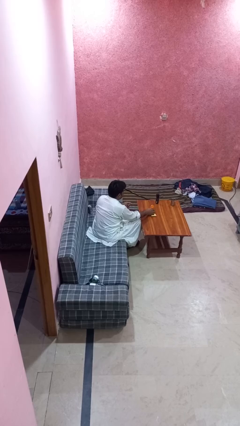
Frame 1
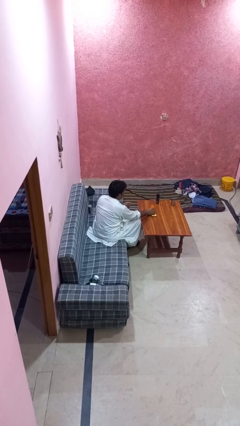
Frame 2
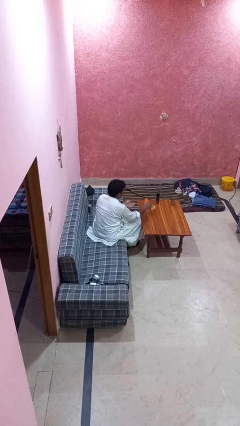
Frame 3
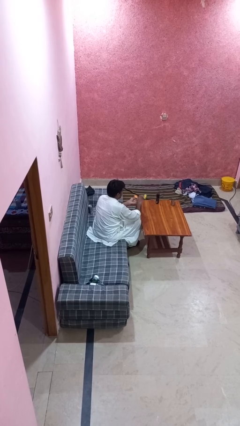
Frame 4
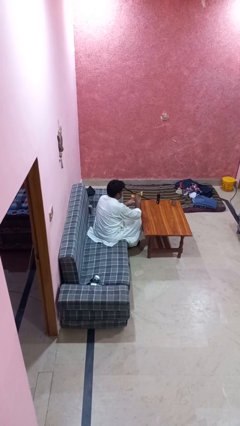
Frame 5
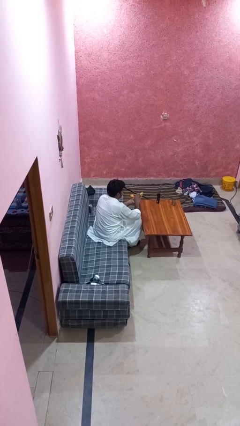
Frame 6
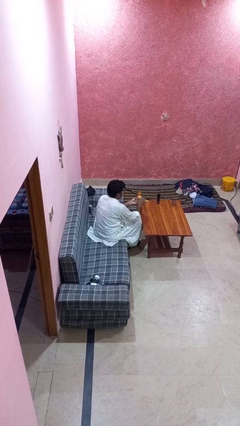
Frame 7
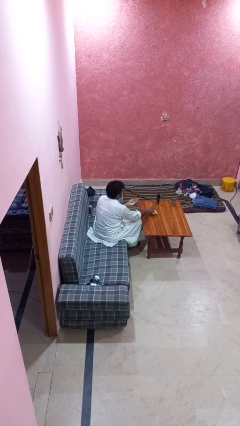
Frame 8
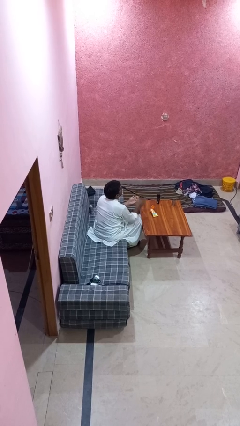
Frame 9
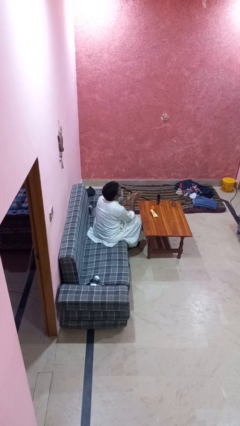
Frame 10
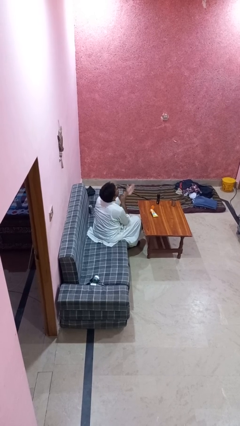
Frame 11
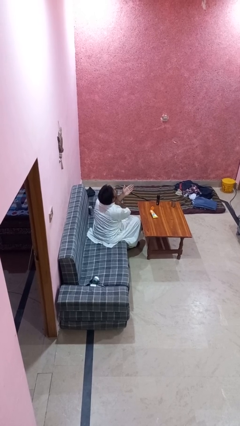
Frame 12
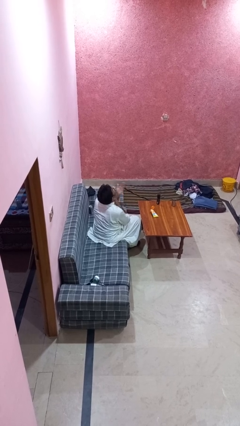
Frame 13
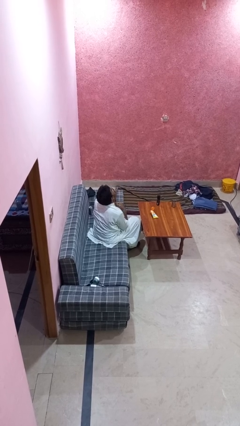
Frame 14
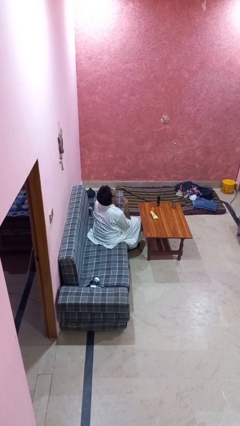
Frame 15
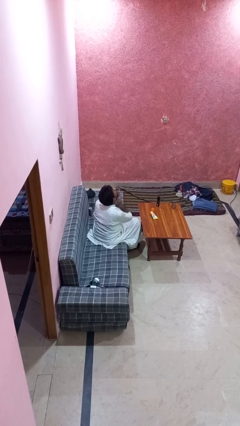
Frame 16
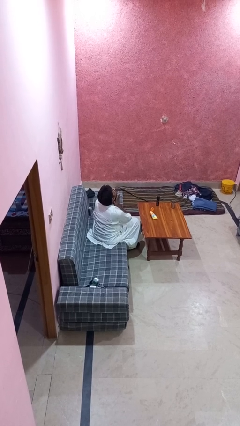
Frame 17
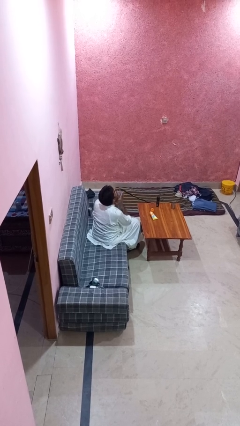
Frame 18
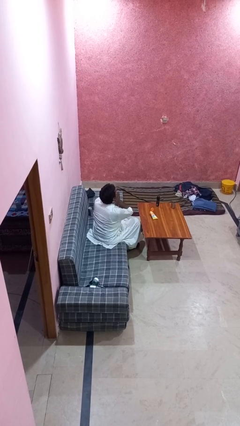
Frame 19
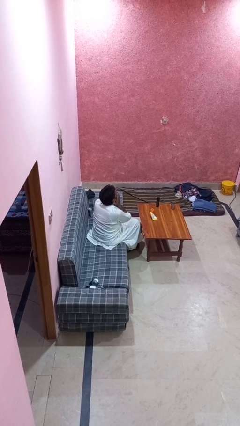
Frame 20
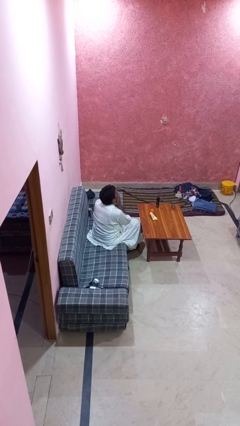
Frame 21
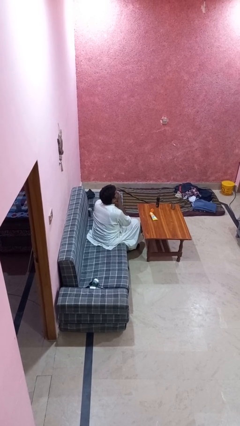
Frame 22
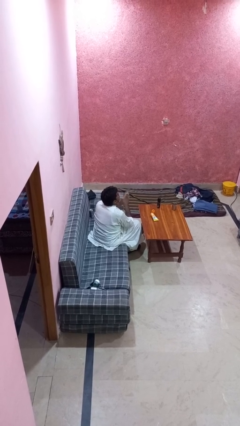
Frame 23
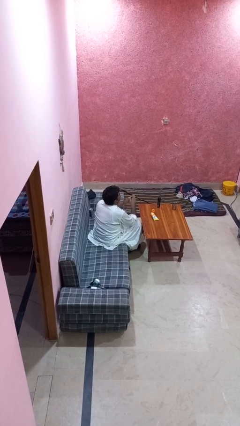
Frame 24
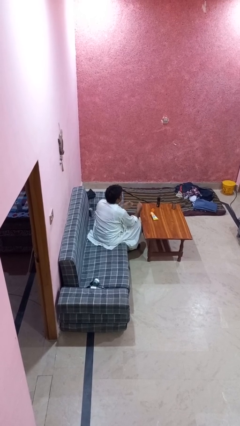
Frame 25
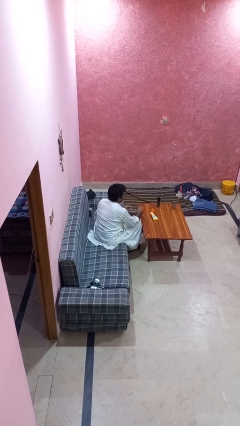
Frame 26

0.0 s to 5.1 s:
person applies sunscreen

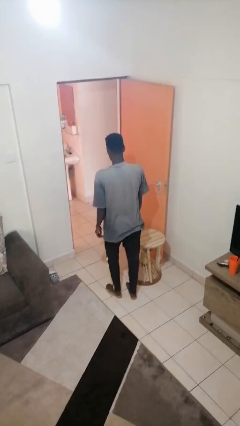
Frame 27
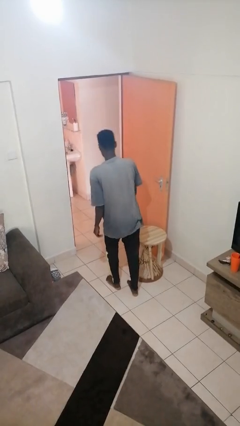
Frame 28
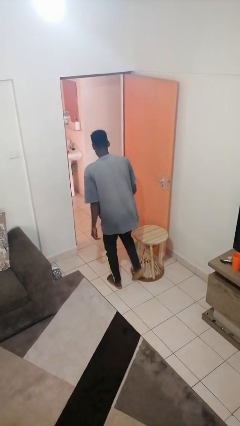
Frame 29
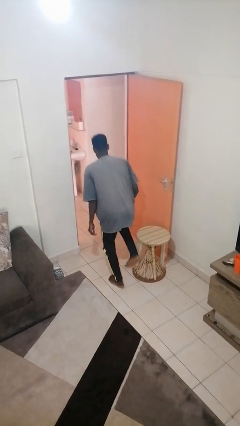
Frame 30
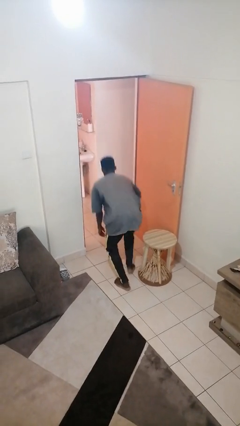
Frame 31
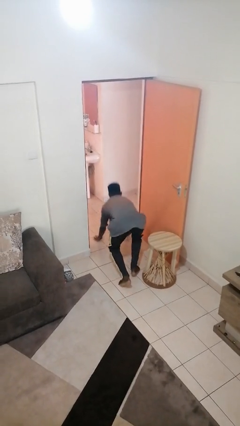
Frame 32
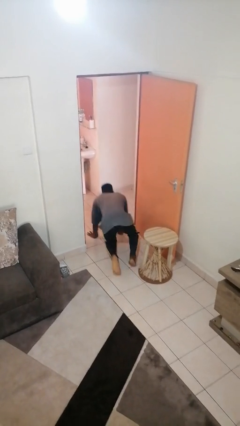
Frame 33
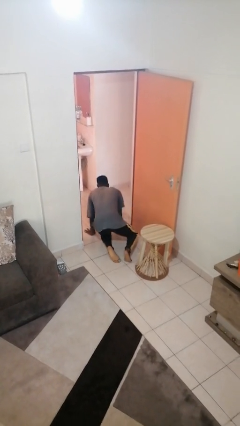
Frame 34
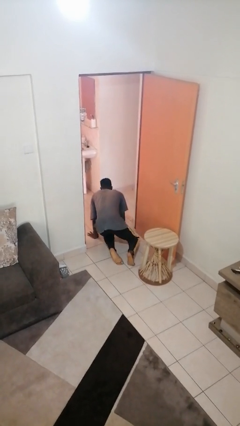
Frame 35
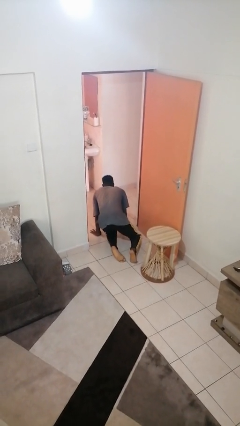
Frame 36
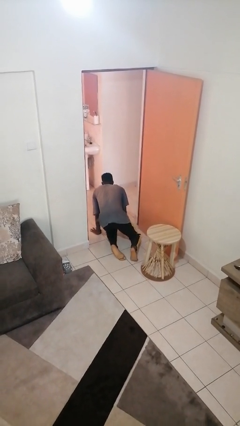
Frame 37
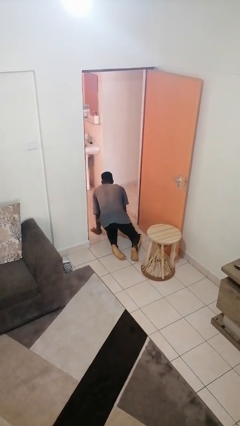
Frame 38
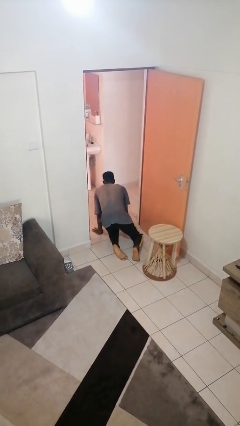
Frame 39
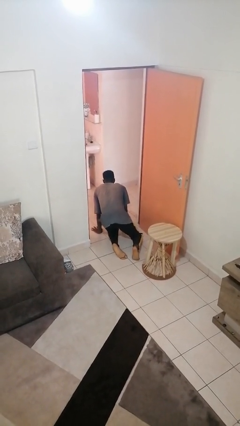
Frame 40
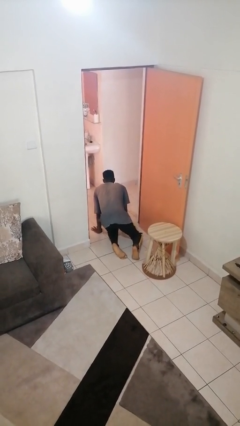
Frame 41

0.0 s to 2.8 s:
person trips on object on floor

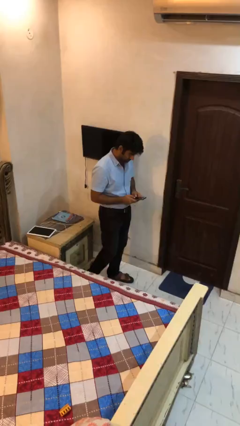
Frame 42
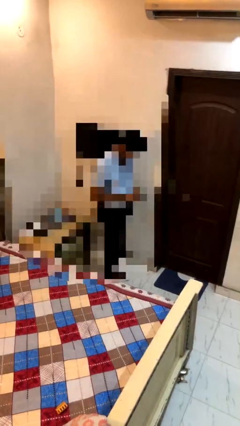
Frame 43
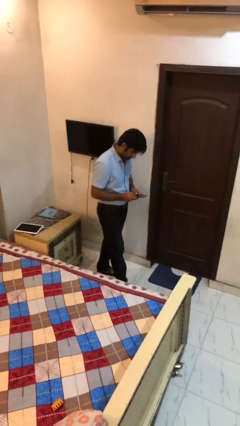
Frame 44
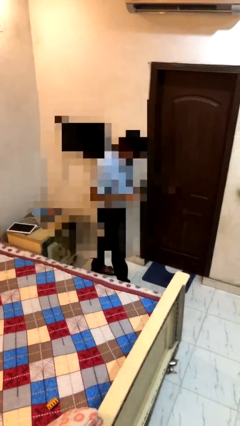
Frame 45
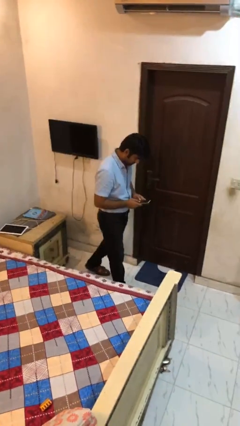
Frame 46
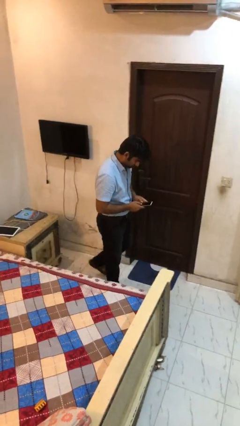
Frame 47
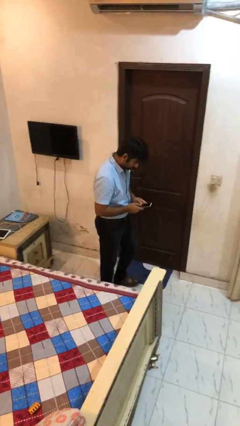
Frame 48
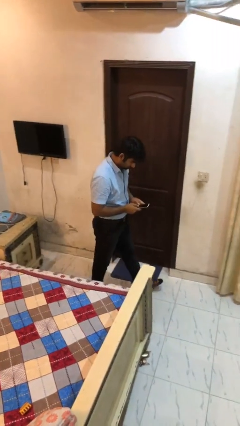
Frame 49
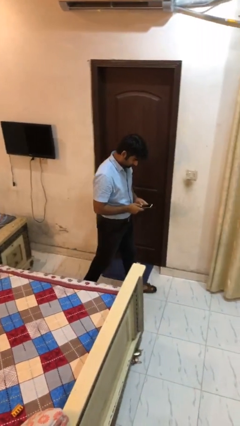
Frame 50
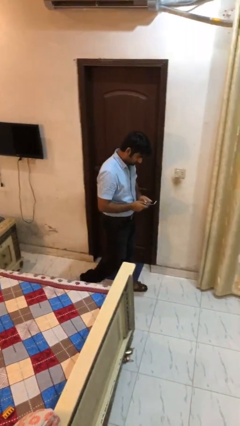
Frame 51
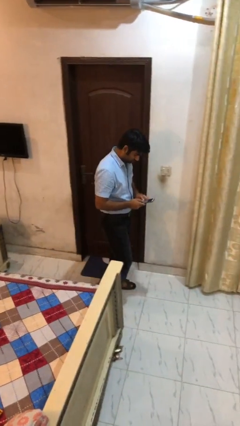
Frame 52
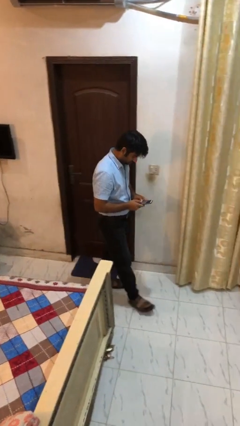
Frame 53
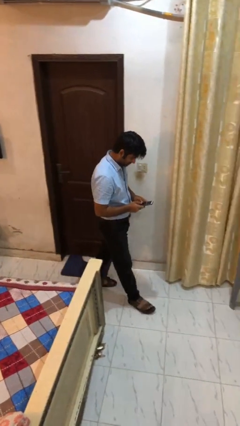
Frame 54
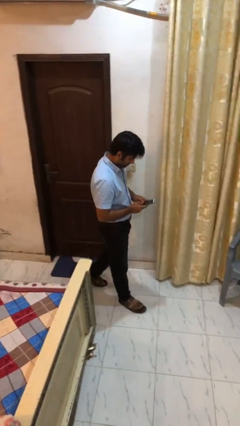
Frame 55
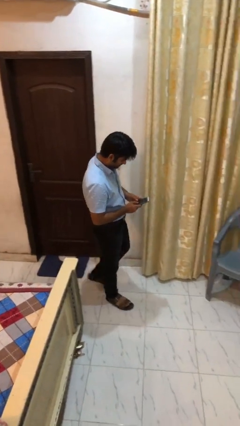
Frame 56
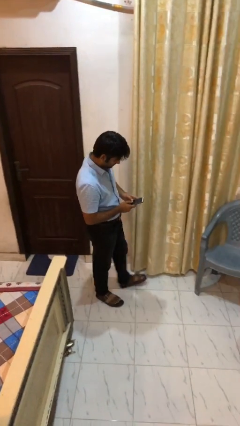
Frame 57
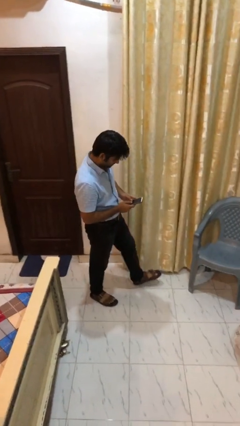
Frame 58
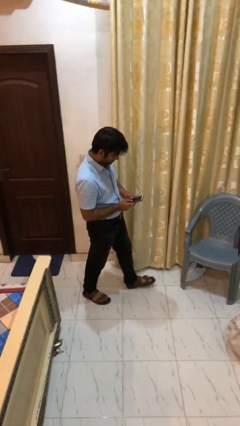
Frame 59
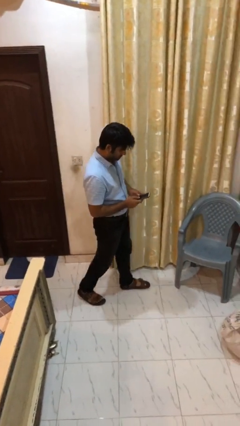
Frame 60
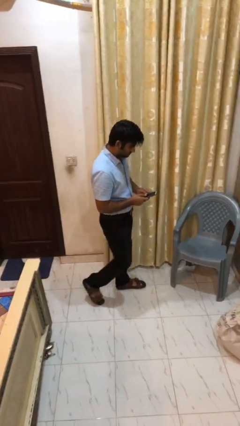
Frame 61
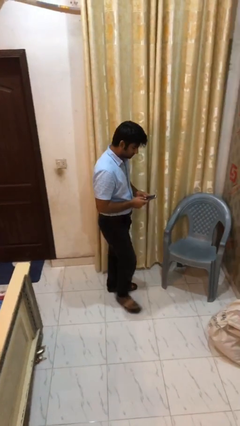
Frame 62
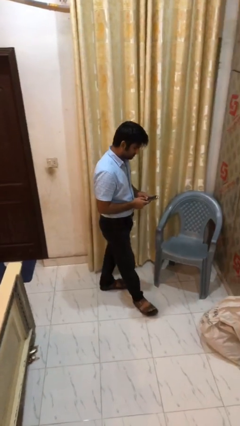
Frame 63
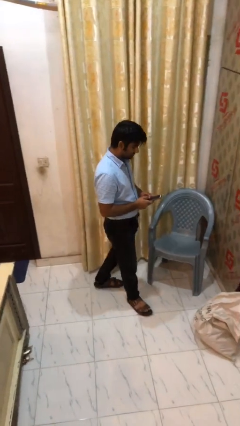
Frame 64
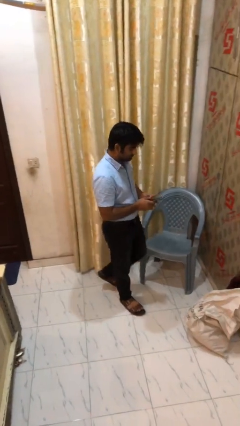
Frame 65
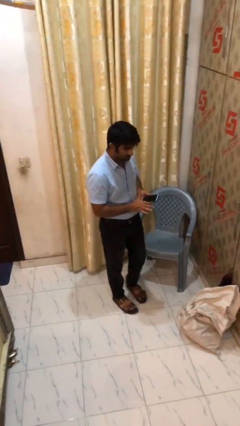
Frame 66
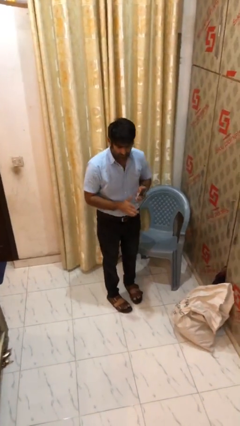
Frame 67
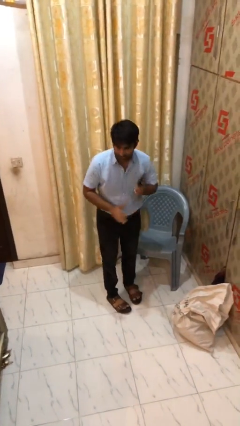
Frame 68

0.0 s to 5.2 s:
person texts on phone

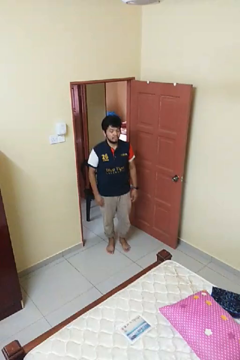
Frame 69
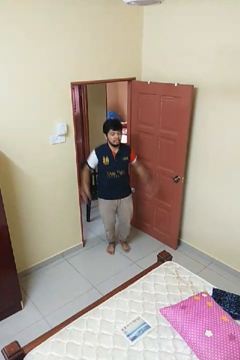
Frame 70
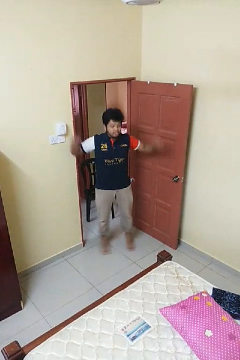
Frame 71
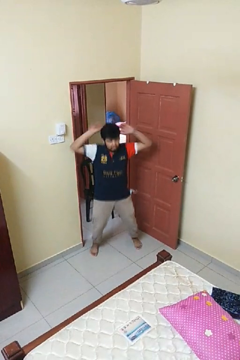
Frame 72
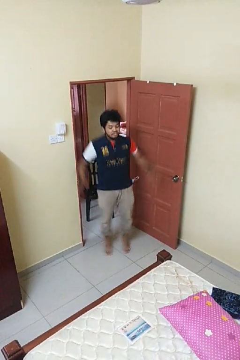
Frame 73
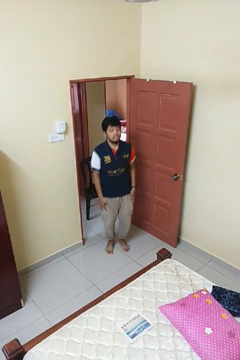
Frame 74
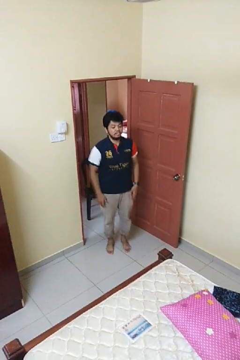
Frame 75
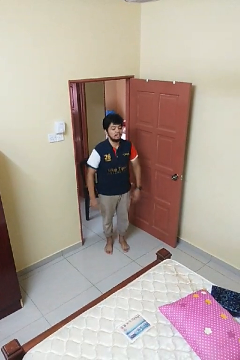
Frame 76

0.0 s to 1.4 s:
person exercises with jumping jacks

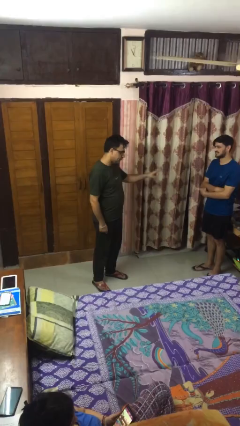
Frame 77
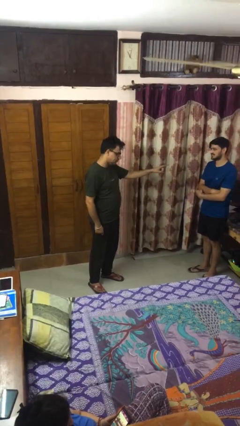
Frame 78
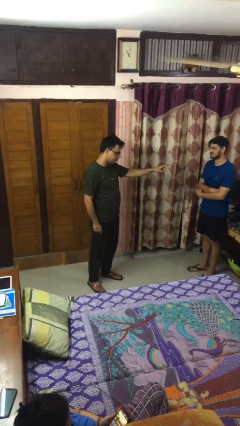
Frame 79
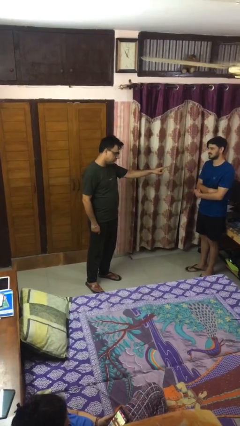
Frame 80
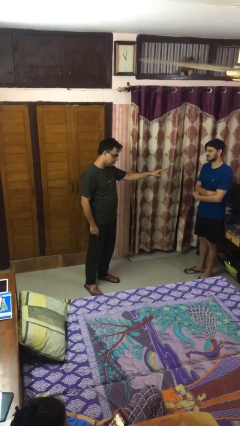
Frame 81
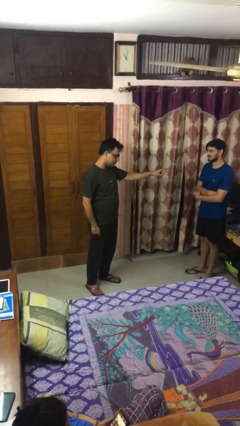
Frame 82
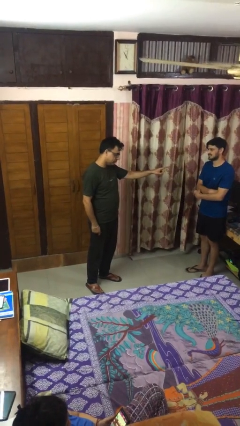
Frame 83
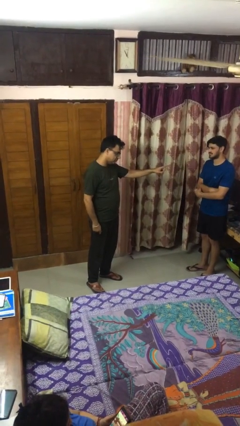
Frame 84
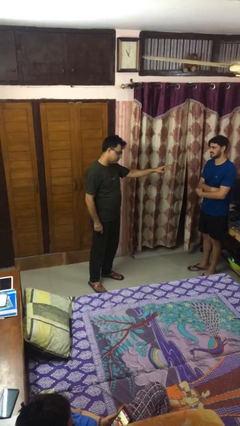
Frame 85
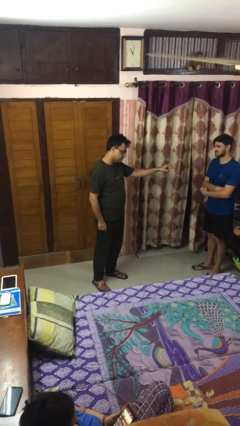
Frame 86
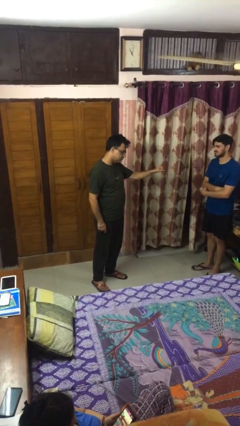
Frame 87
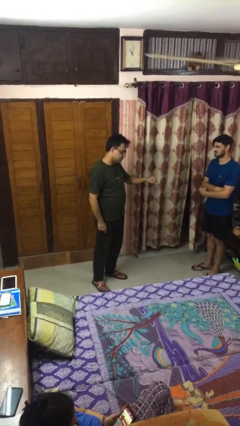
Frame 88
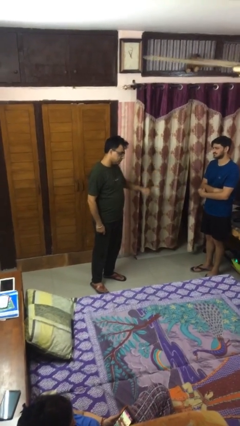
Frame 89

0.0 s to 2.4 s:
person points at person

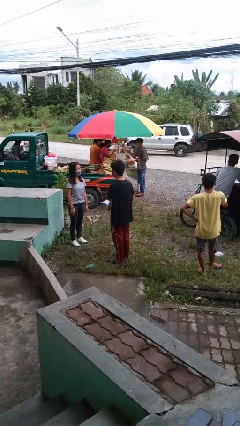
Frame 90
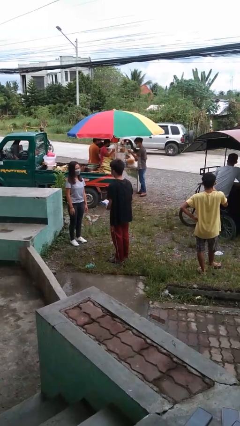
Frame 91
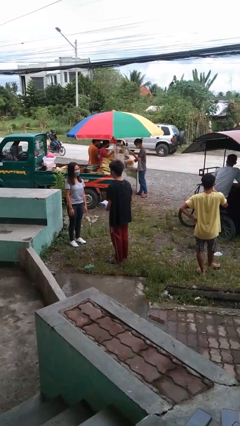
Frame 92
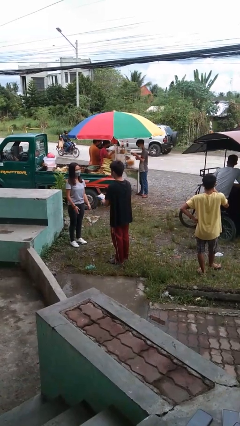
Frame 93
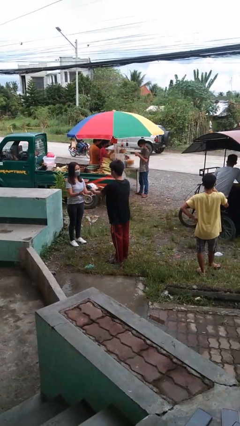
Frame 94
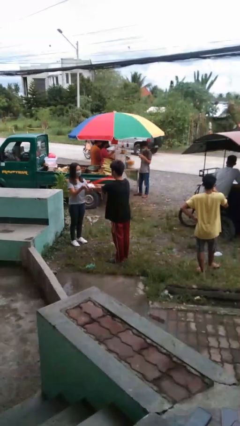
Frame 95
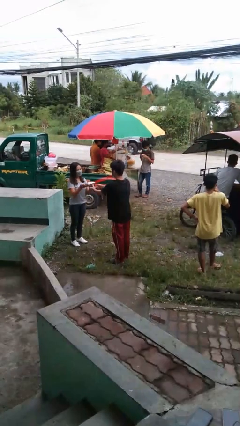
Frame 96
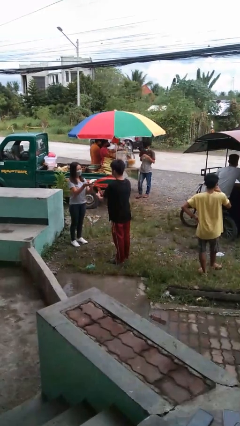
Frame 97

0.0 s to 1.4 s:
person transfers object to person
